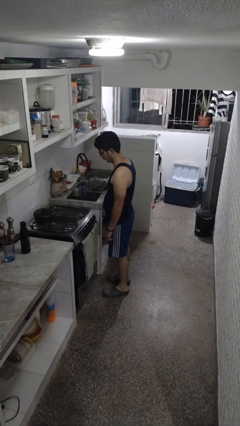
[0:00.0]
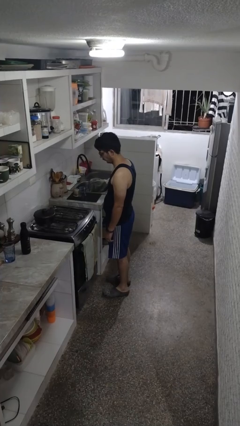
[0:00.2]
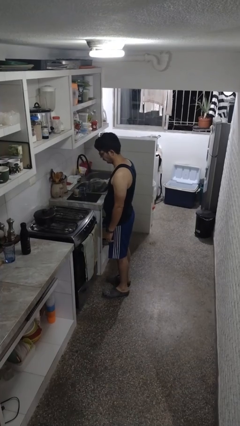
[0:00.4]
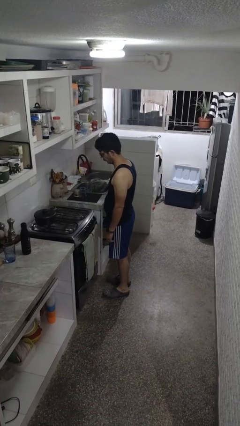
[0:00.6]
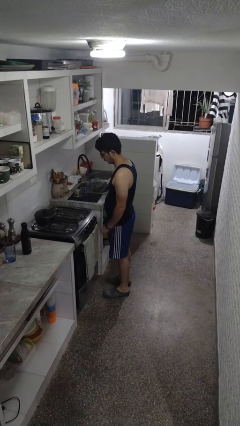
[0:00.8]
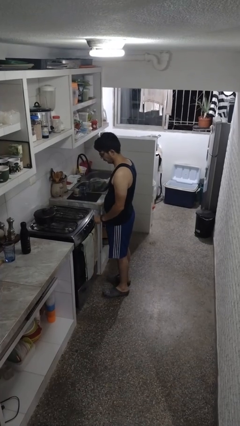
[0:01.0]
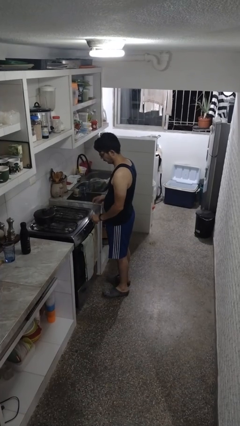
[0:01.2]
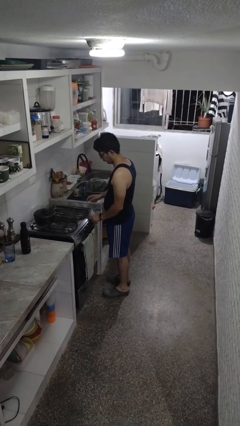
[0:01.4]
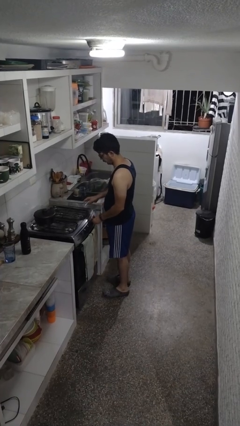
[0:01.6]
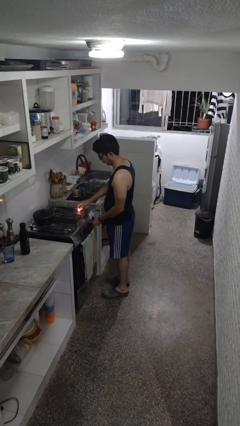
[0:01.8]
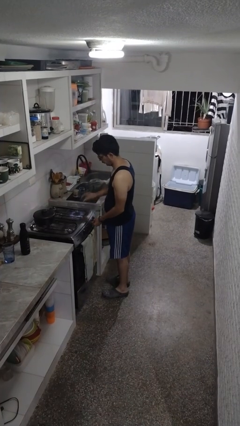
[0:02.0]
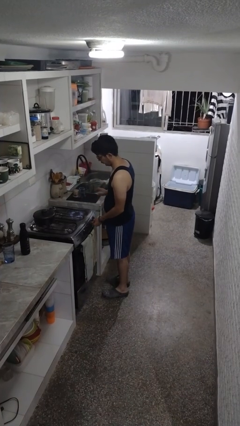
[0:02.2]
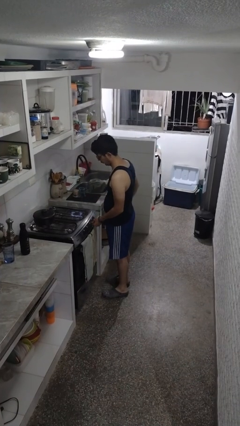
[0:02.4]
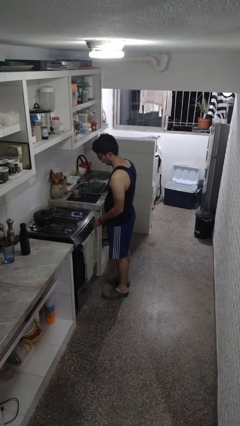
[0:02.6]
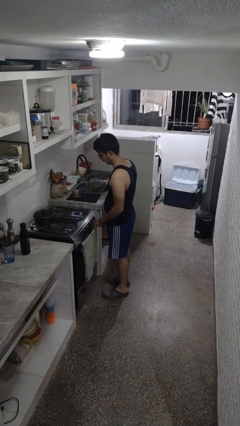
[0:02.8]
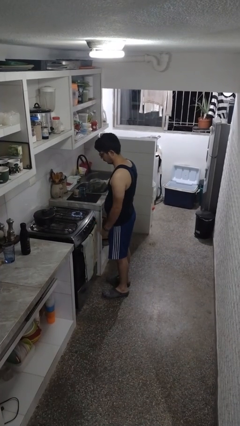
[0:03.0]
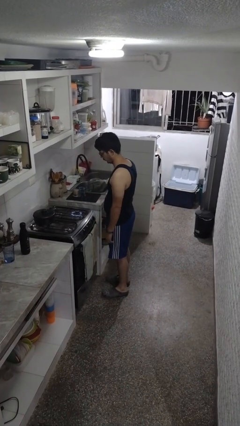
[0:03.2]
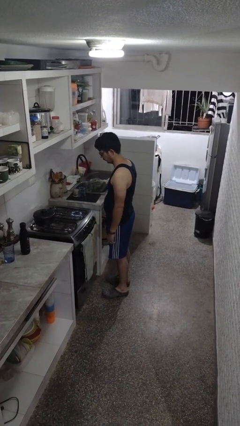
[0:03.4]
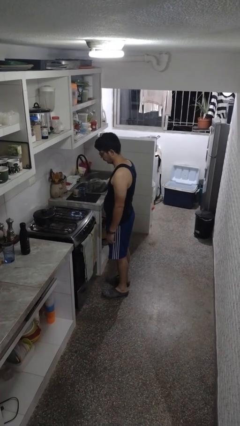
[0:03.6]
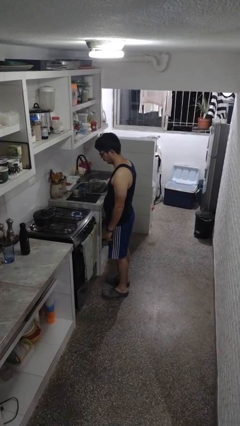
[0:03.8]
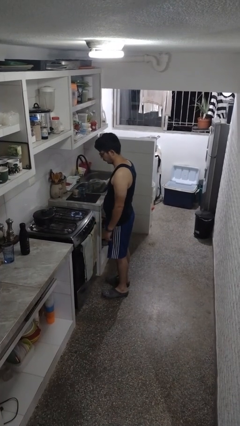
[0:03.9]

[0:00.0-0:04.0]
person turns on stovetop

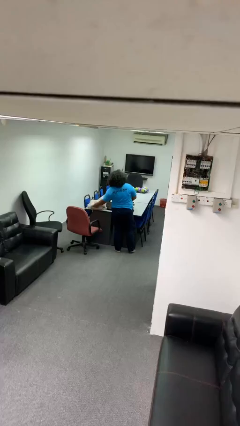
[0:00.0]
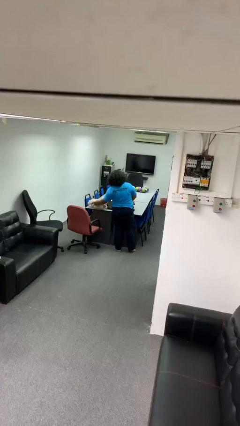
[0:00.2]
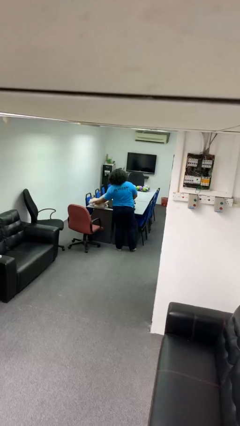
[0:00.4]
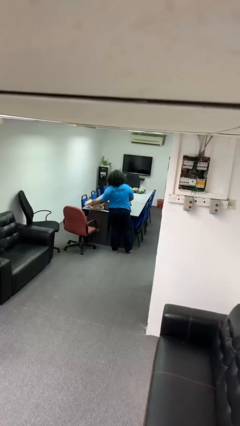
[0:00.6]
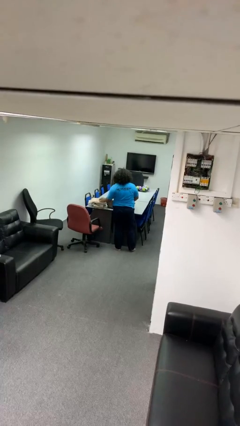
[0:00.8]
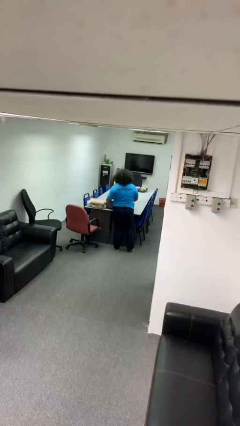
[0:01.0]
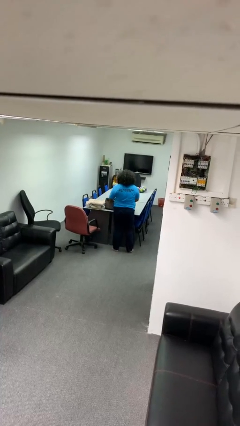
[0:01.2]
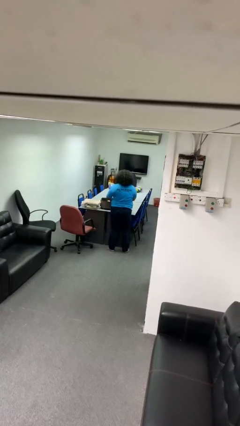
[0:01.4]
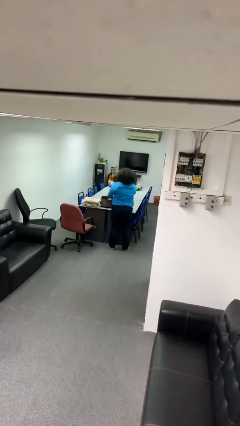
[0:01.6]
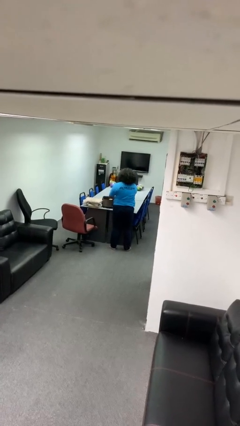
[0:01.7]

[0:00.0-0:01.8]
person unloads clothes from suitcase

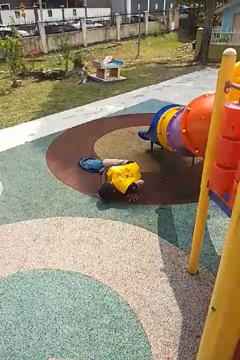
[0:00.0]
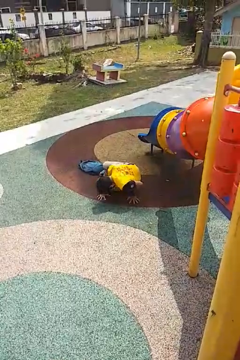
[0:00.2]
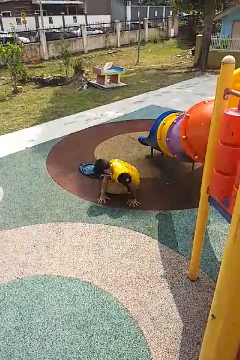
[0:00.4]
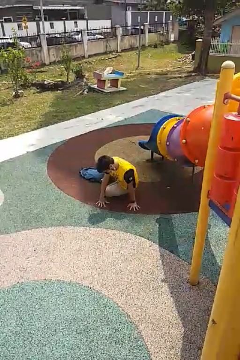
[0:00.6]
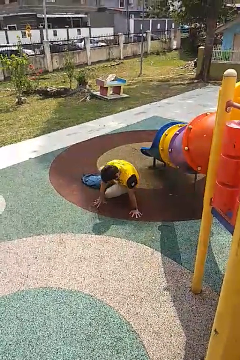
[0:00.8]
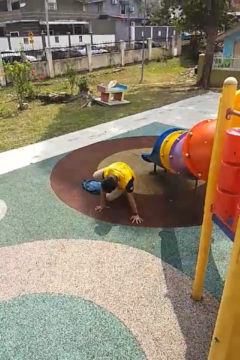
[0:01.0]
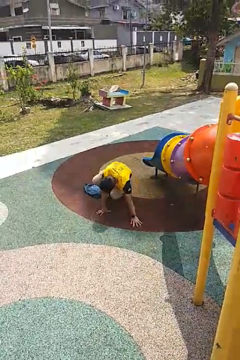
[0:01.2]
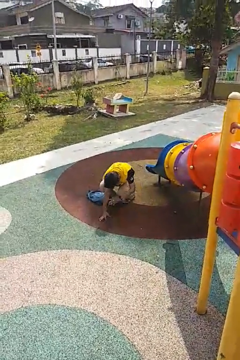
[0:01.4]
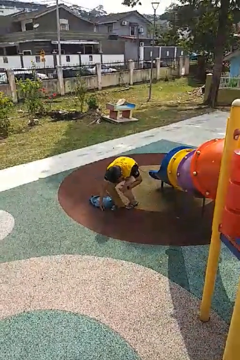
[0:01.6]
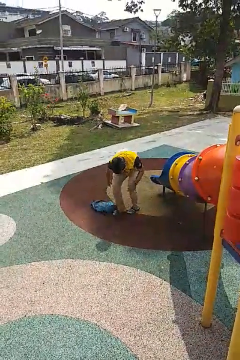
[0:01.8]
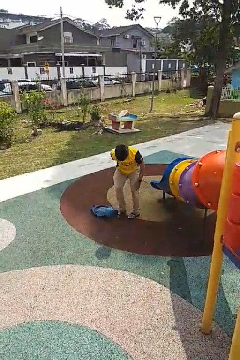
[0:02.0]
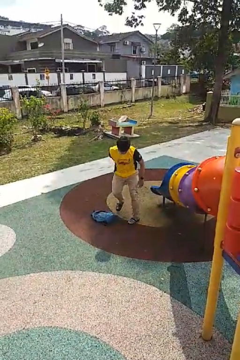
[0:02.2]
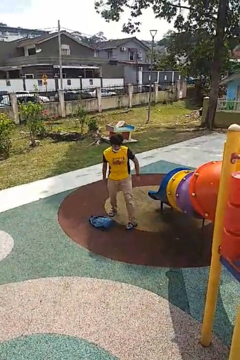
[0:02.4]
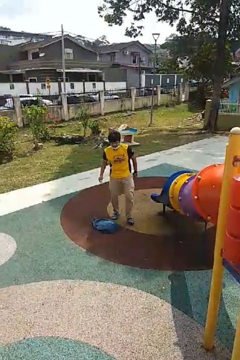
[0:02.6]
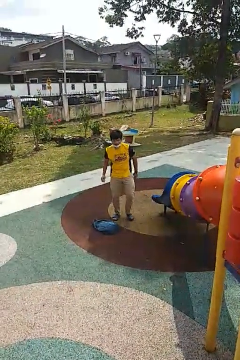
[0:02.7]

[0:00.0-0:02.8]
person stands up from floor

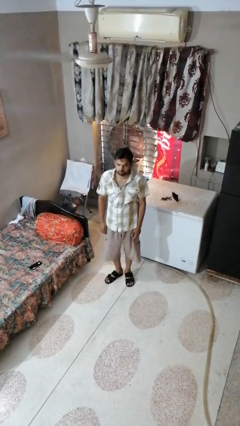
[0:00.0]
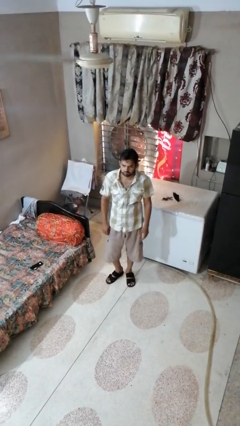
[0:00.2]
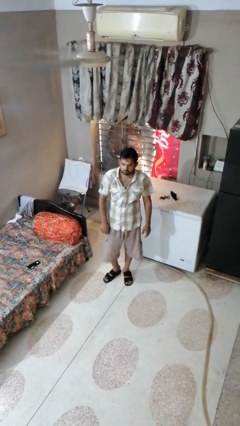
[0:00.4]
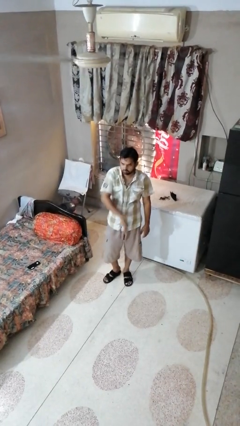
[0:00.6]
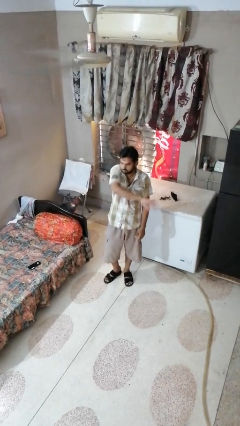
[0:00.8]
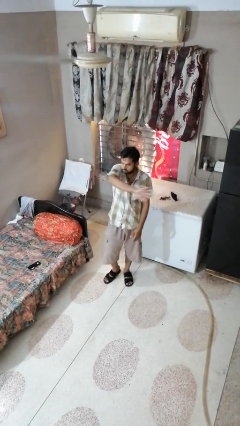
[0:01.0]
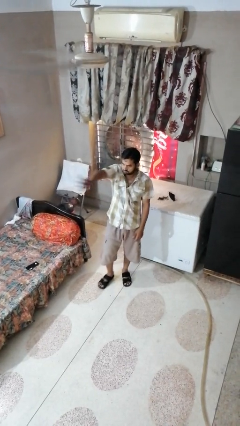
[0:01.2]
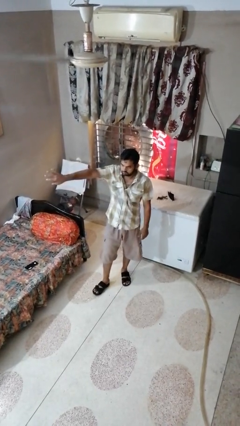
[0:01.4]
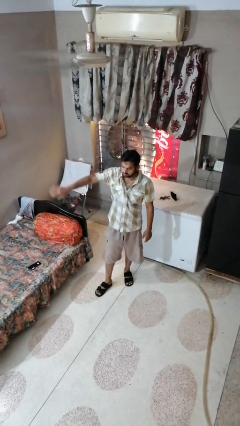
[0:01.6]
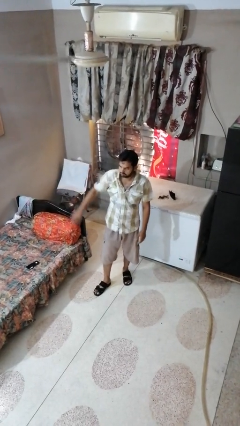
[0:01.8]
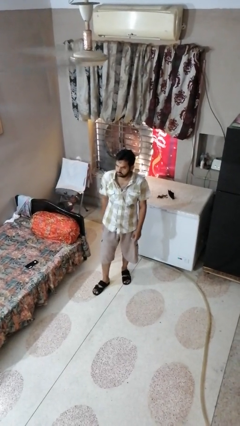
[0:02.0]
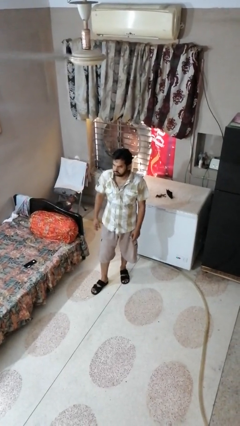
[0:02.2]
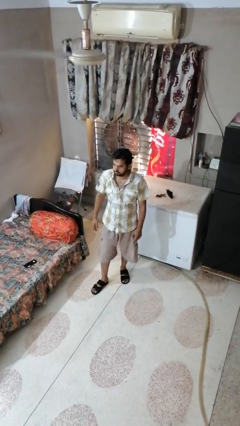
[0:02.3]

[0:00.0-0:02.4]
person gestures swipe right

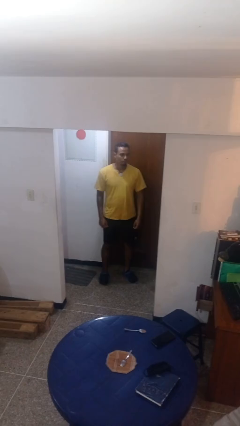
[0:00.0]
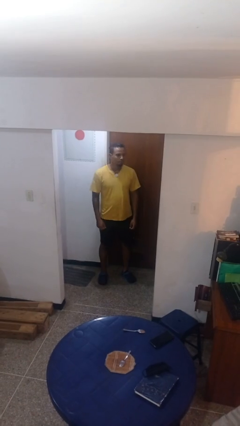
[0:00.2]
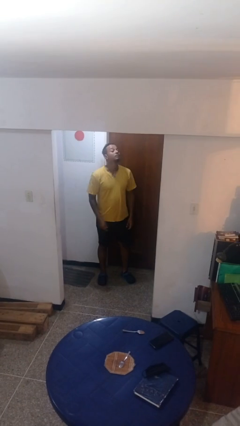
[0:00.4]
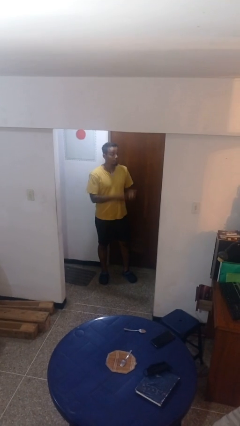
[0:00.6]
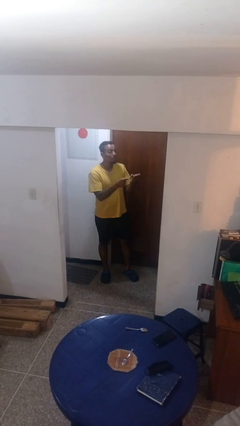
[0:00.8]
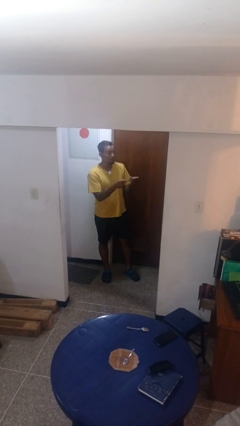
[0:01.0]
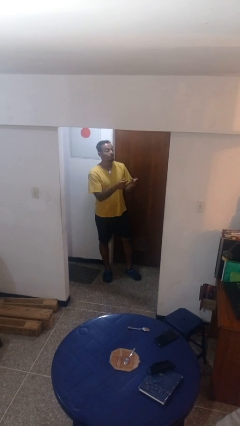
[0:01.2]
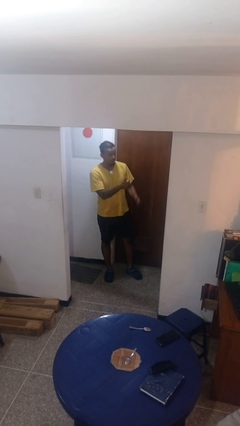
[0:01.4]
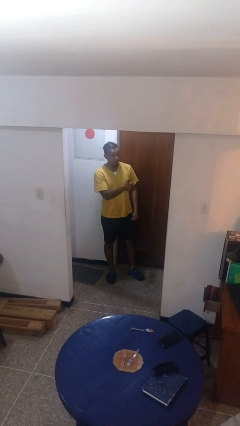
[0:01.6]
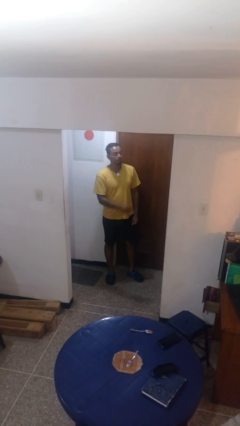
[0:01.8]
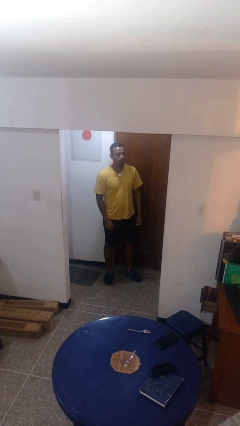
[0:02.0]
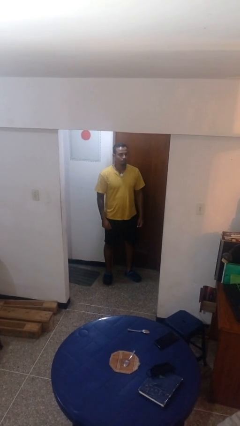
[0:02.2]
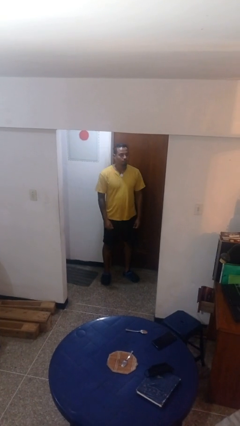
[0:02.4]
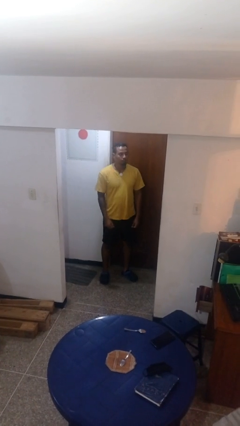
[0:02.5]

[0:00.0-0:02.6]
person nods head

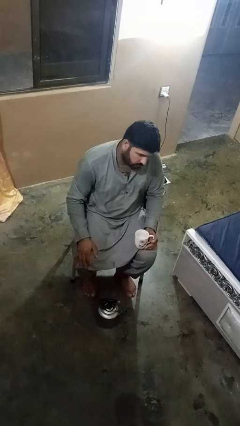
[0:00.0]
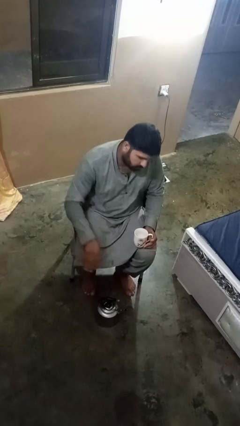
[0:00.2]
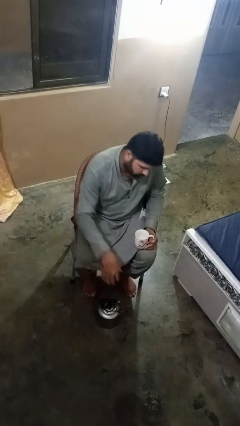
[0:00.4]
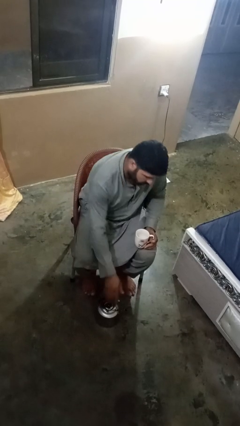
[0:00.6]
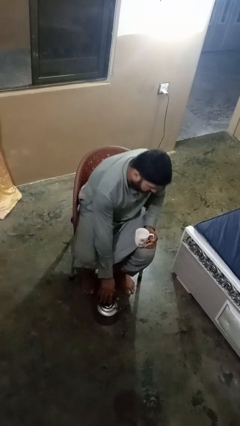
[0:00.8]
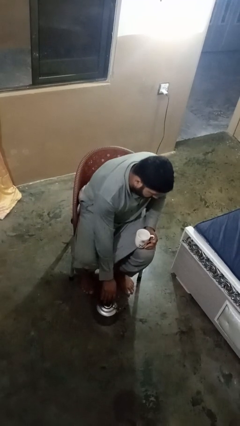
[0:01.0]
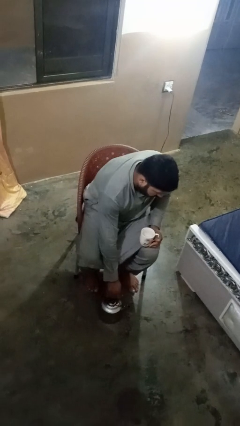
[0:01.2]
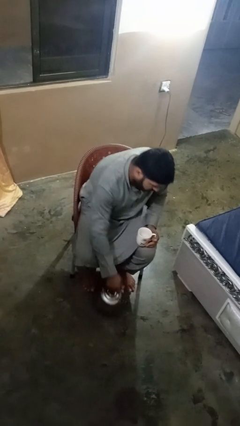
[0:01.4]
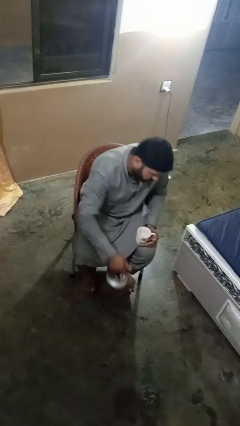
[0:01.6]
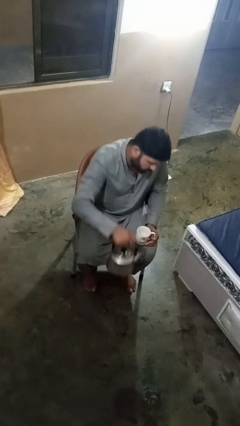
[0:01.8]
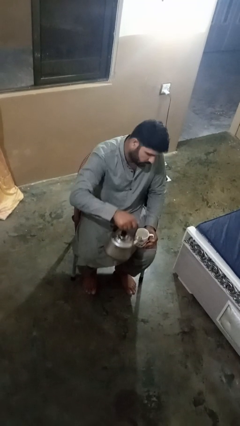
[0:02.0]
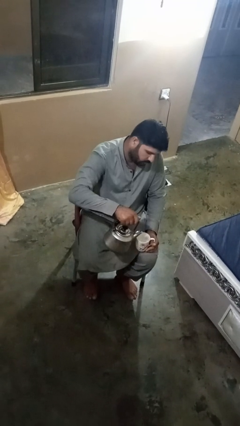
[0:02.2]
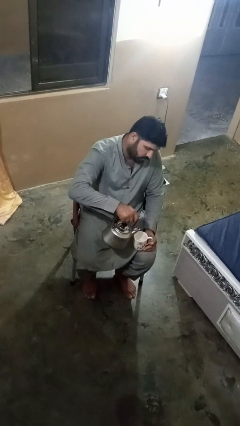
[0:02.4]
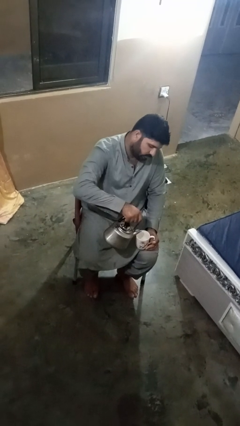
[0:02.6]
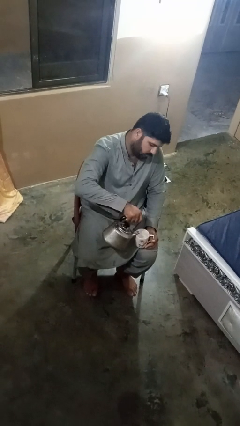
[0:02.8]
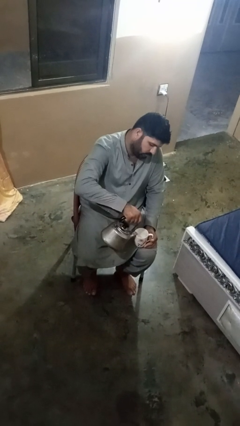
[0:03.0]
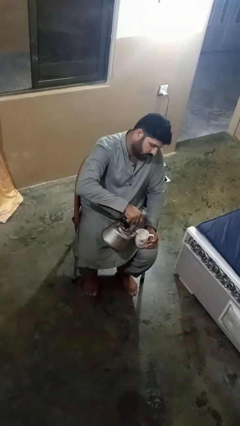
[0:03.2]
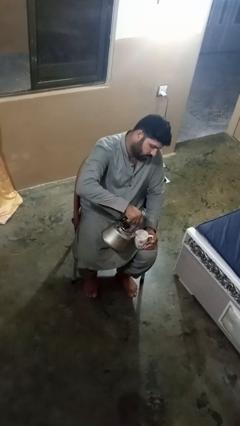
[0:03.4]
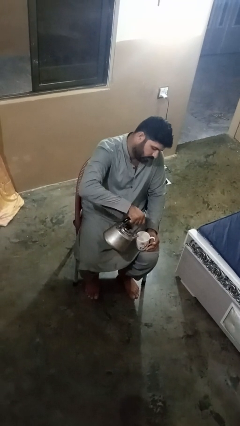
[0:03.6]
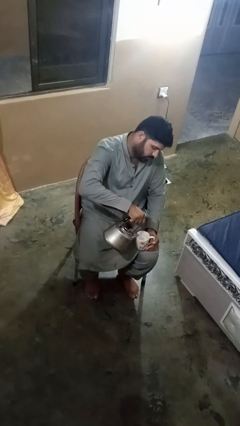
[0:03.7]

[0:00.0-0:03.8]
person pours coffee into mug

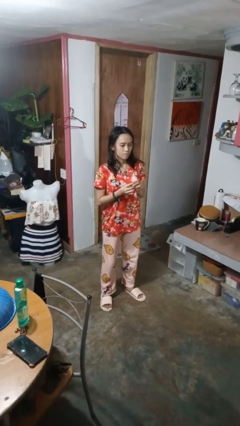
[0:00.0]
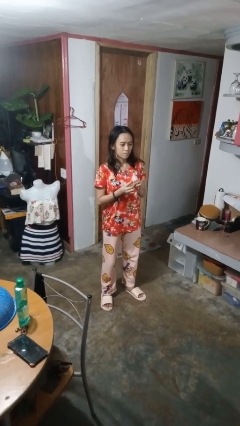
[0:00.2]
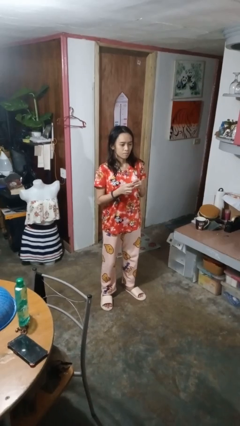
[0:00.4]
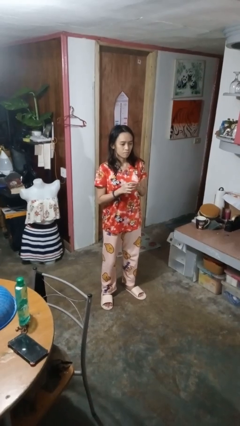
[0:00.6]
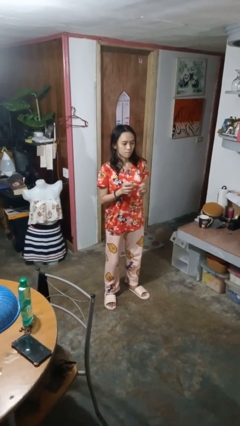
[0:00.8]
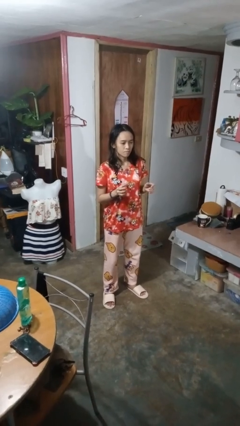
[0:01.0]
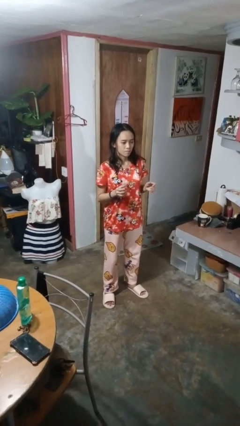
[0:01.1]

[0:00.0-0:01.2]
person puts on ring
